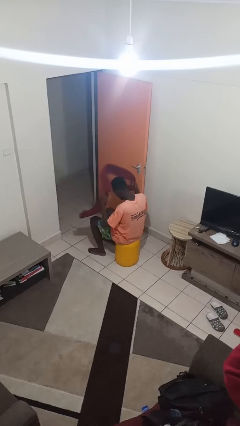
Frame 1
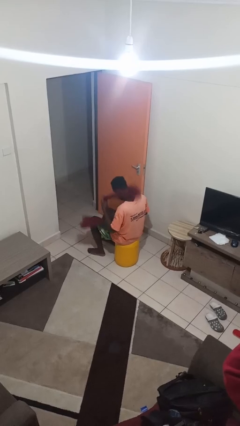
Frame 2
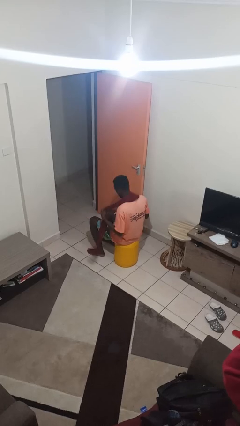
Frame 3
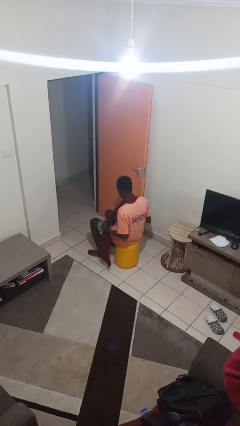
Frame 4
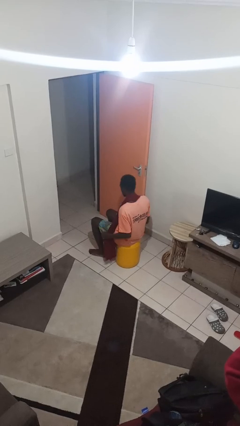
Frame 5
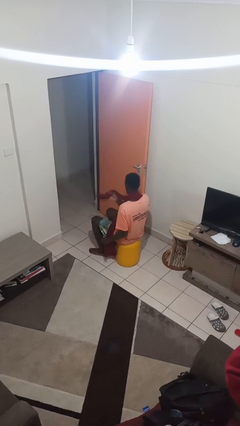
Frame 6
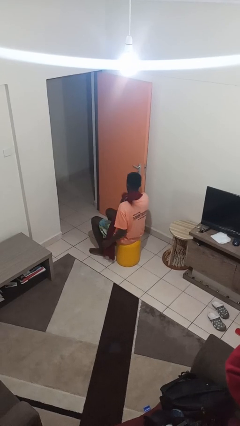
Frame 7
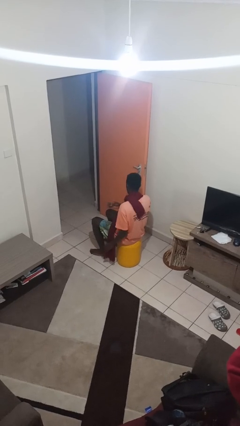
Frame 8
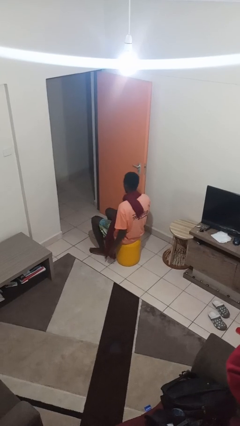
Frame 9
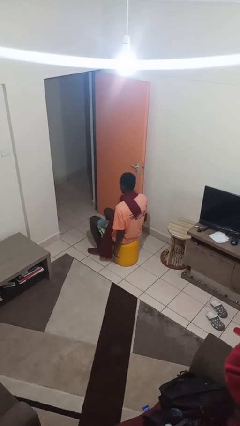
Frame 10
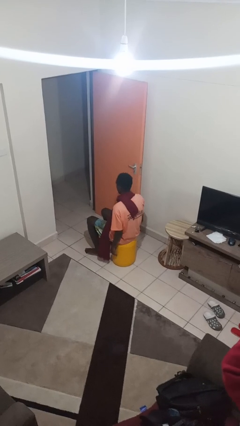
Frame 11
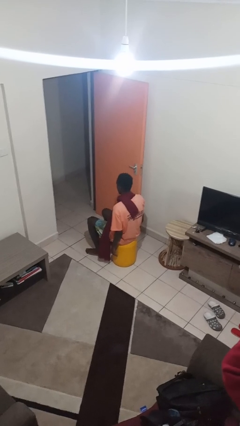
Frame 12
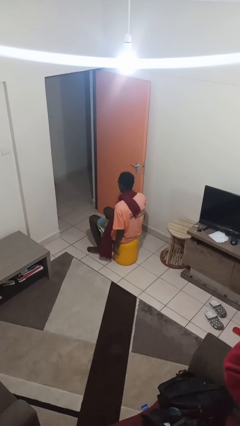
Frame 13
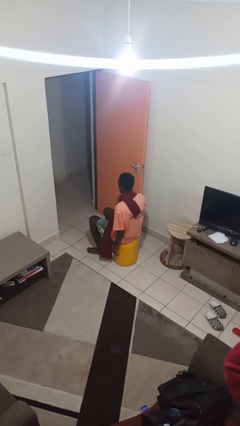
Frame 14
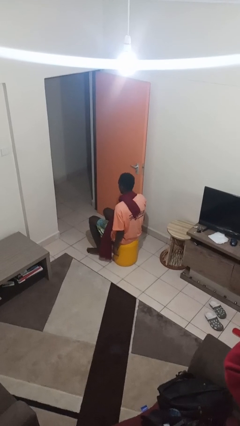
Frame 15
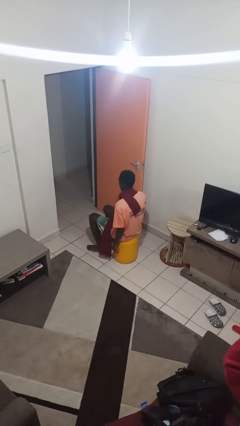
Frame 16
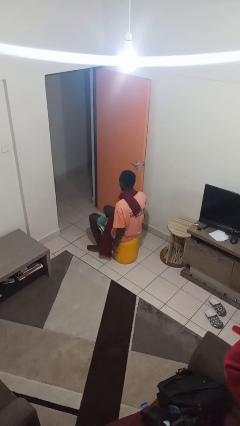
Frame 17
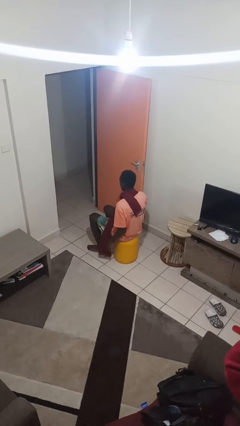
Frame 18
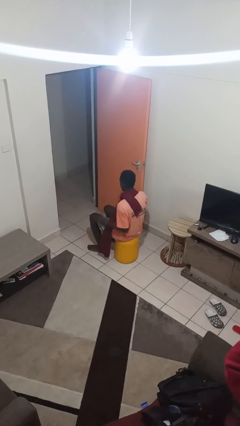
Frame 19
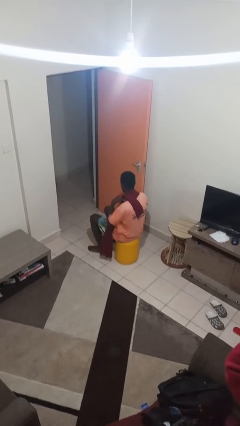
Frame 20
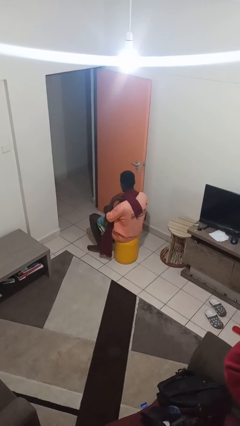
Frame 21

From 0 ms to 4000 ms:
person puts on scarf

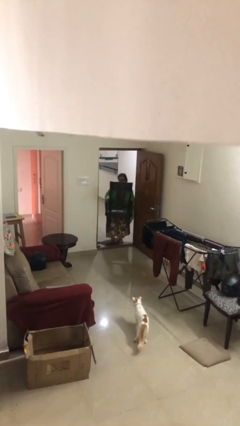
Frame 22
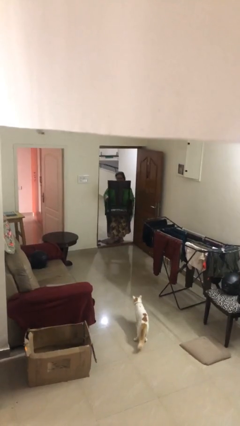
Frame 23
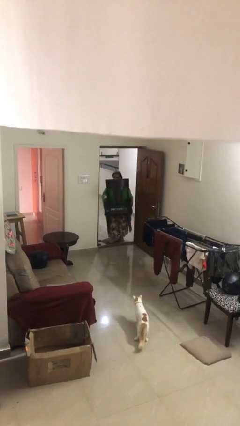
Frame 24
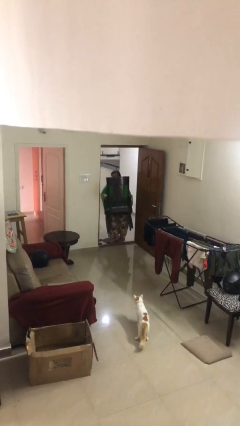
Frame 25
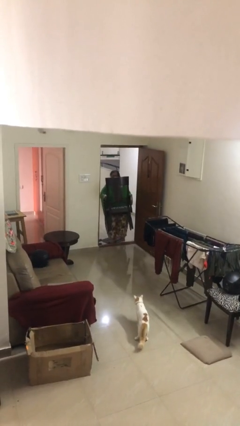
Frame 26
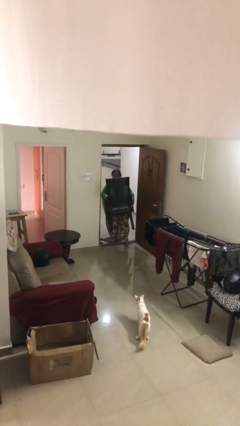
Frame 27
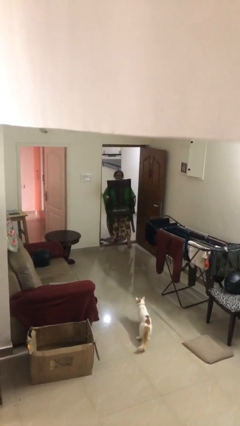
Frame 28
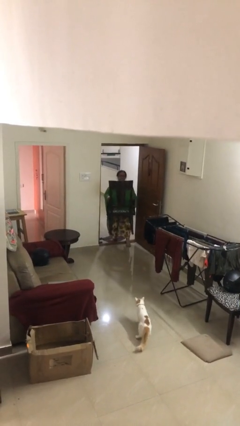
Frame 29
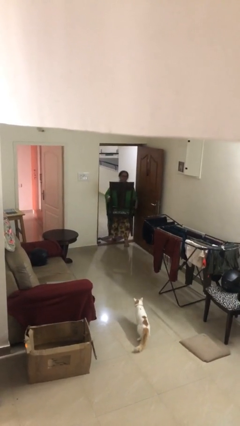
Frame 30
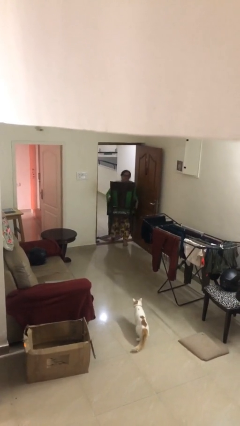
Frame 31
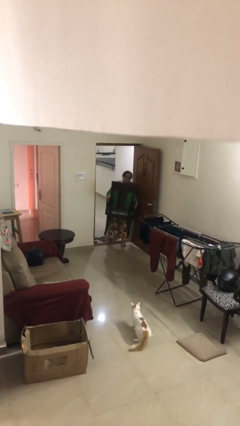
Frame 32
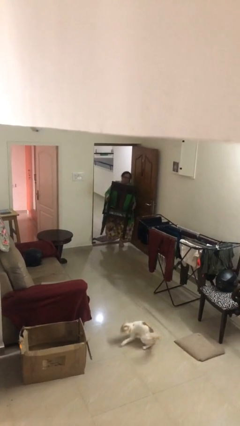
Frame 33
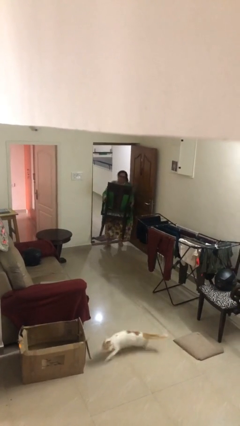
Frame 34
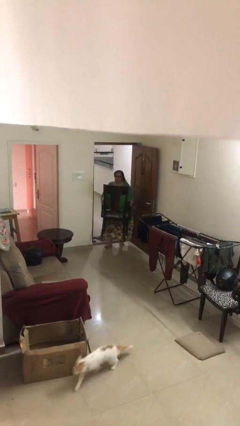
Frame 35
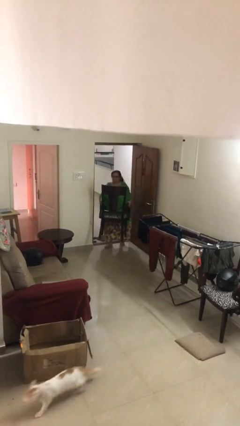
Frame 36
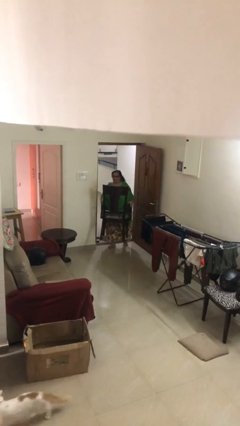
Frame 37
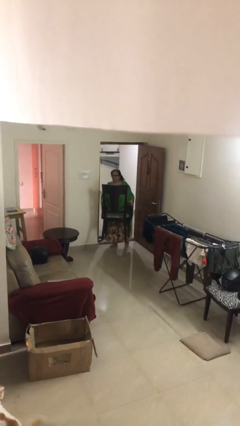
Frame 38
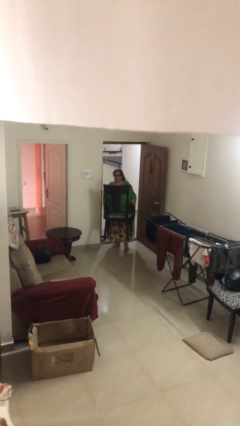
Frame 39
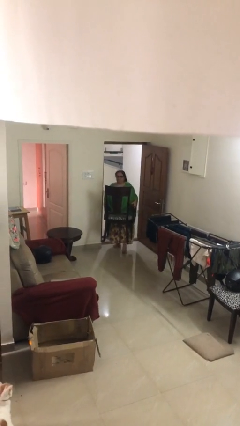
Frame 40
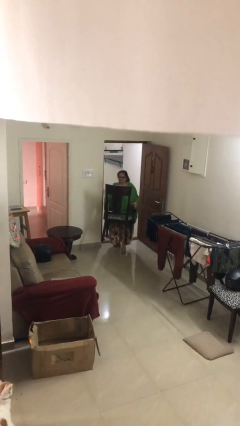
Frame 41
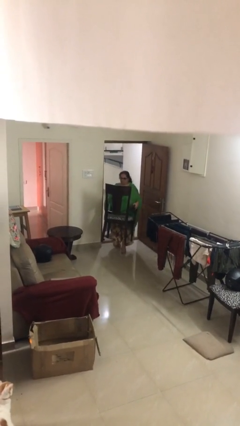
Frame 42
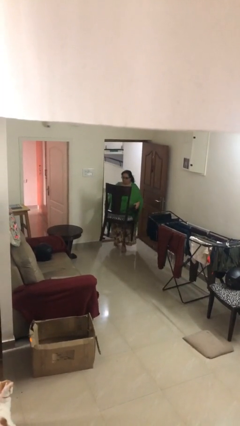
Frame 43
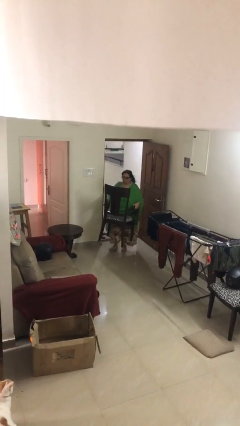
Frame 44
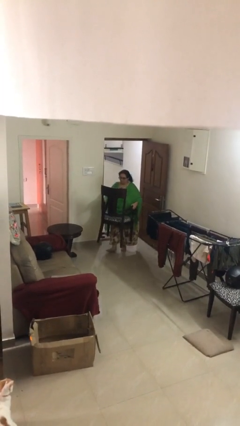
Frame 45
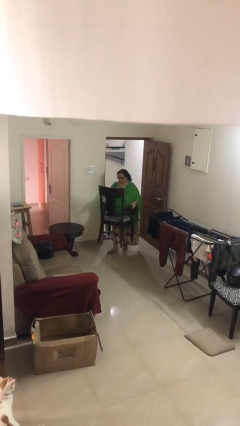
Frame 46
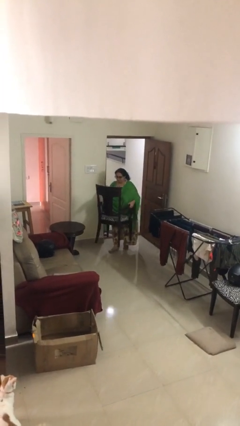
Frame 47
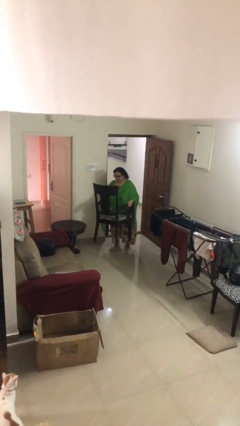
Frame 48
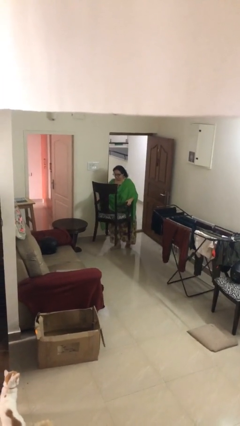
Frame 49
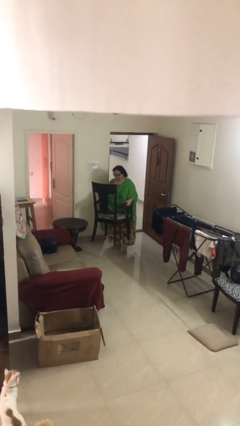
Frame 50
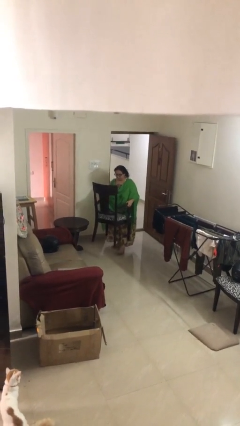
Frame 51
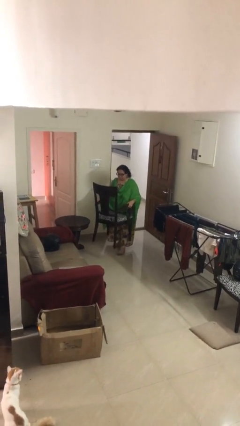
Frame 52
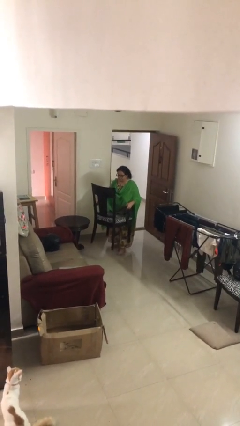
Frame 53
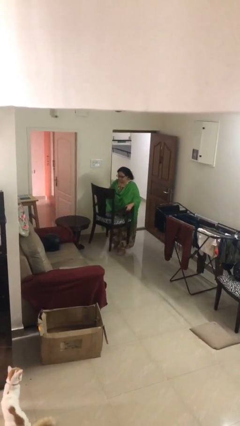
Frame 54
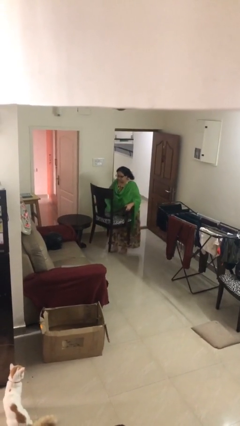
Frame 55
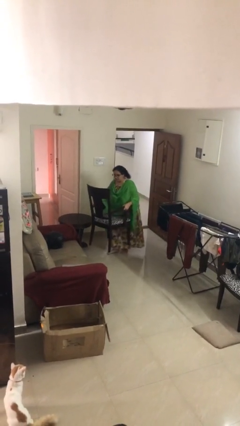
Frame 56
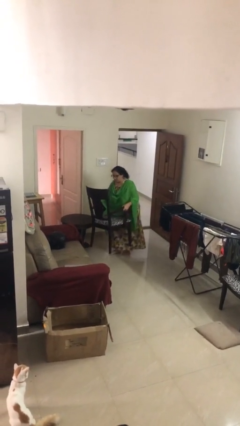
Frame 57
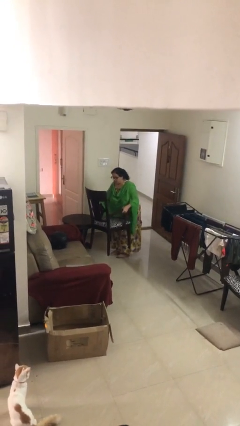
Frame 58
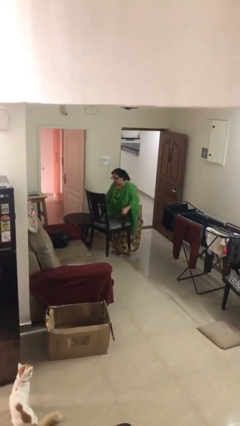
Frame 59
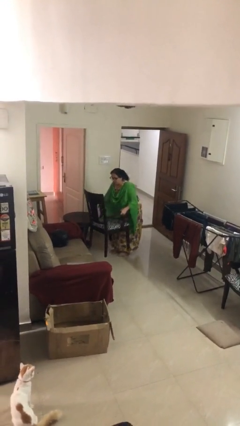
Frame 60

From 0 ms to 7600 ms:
person carries heavy object

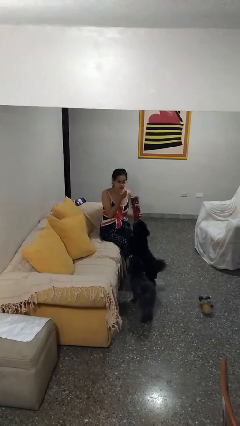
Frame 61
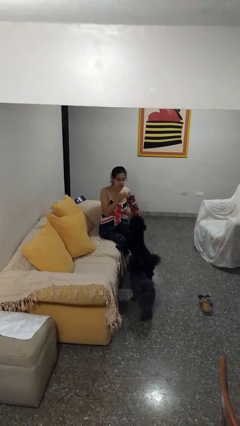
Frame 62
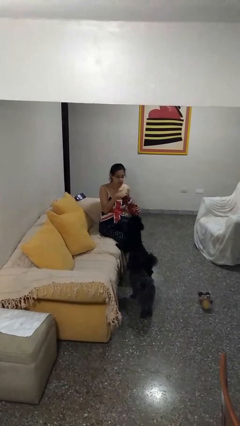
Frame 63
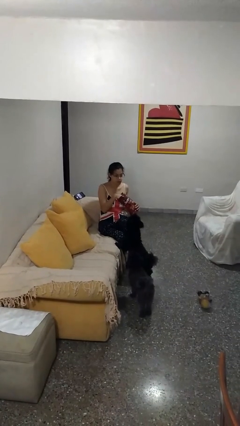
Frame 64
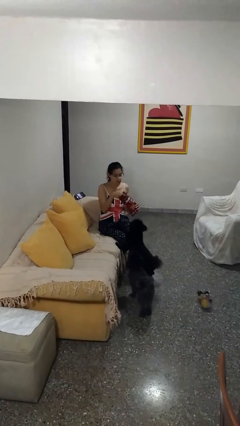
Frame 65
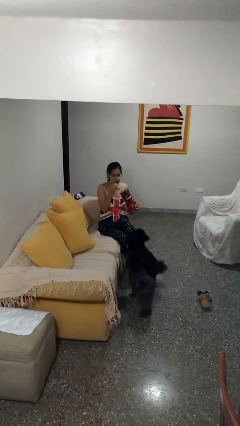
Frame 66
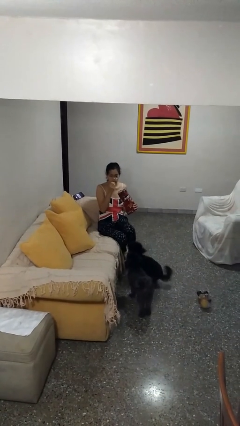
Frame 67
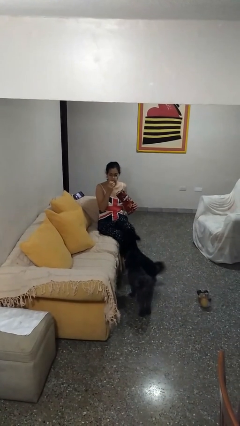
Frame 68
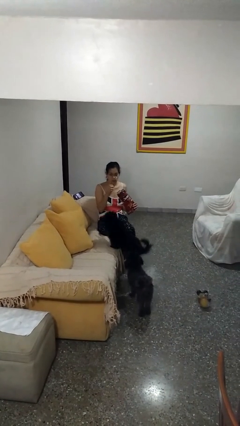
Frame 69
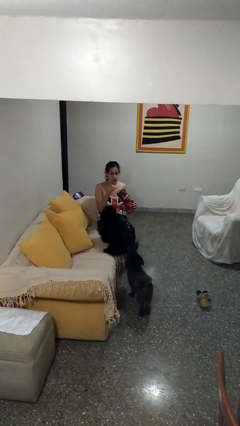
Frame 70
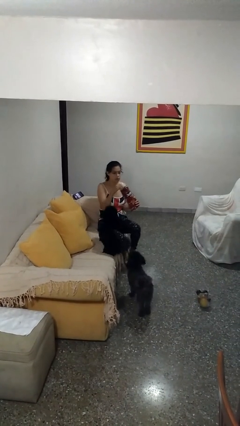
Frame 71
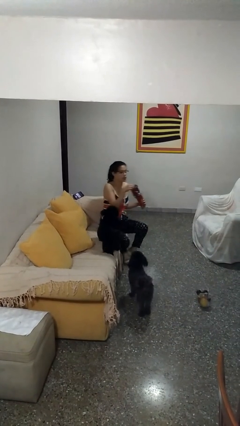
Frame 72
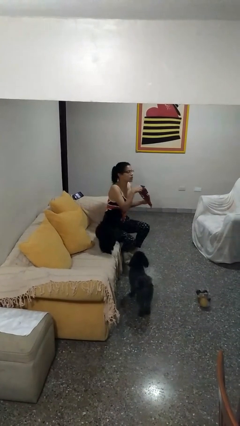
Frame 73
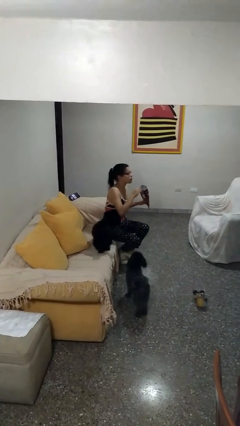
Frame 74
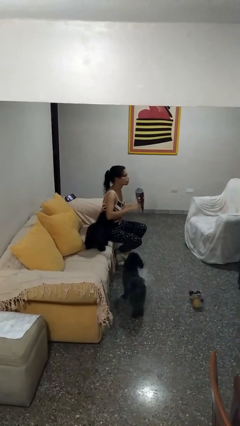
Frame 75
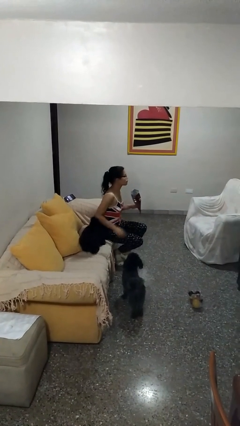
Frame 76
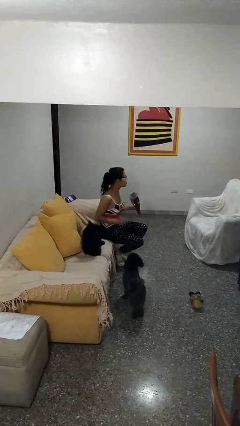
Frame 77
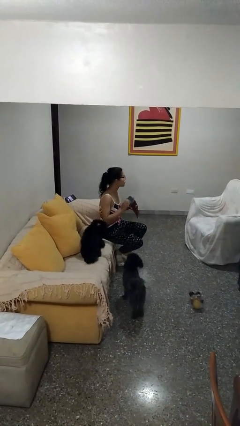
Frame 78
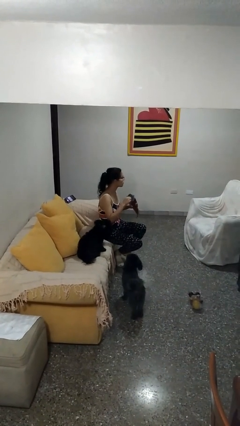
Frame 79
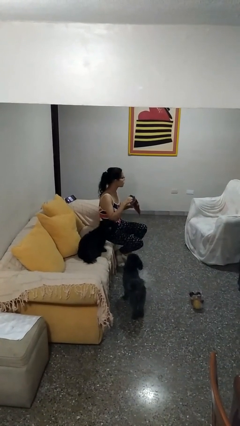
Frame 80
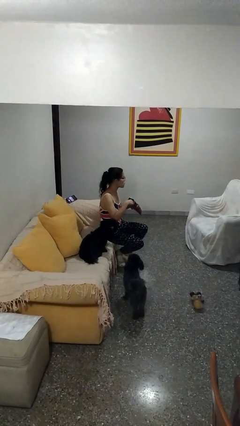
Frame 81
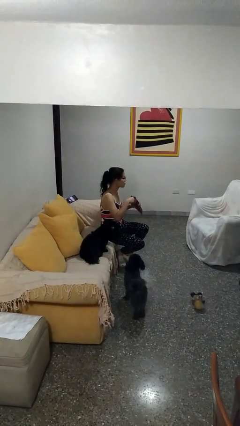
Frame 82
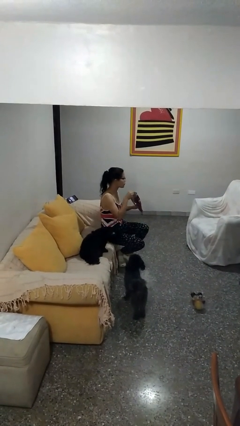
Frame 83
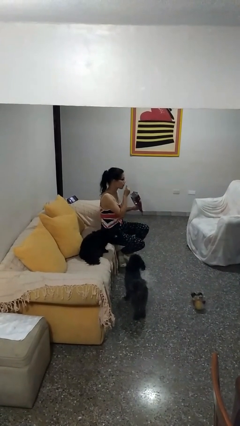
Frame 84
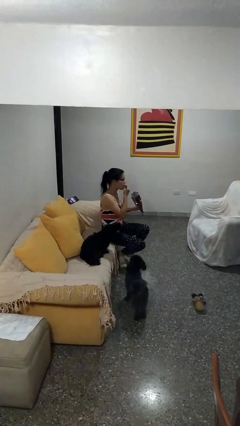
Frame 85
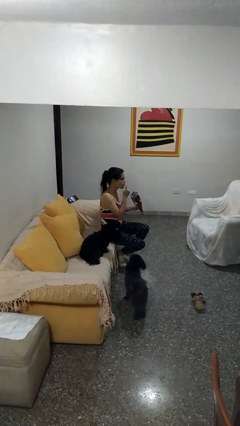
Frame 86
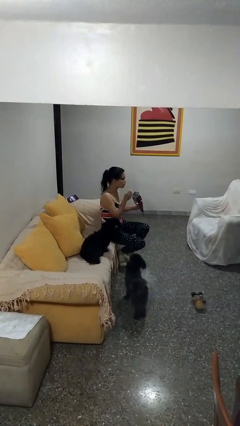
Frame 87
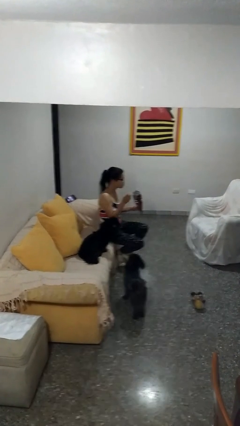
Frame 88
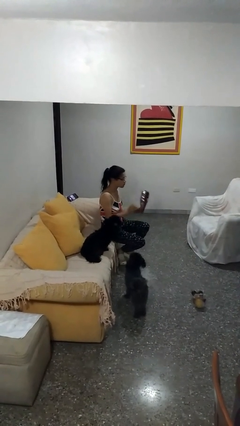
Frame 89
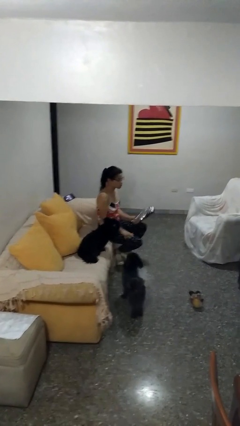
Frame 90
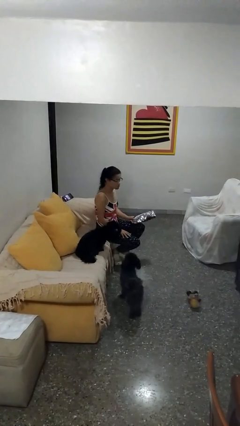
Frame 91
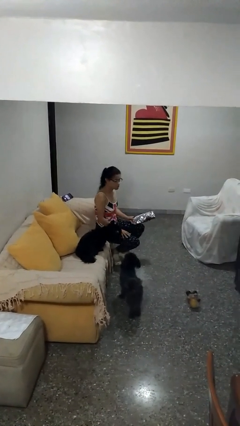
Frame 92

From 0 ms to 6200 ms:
person eats snack from bag
